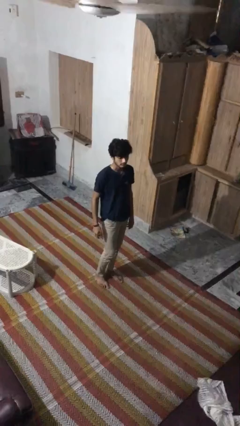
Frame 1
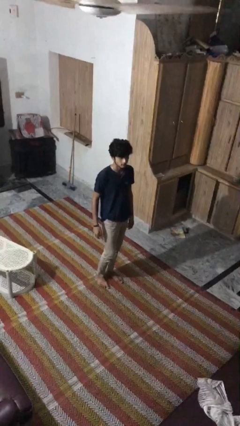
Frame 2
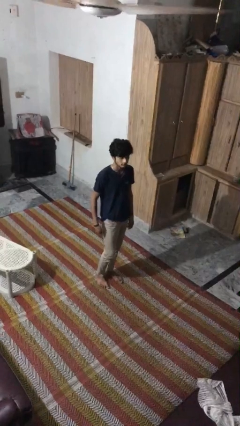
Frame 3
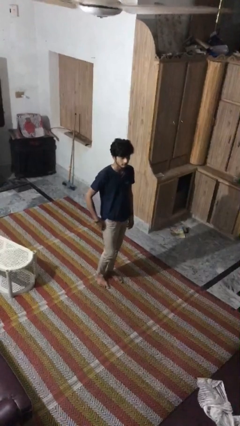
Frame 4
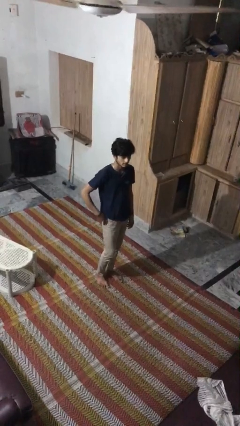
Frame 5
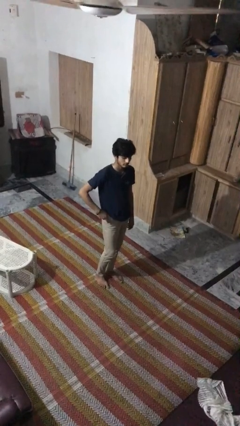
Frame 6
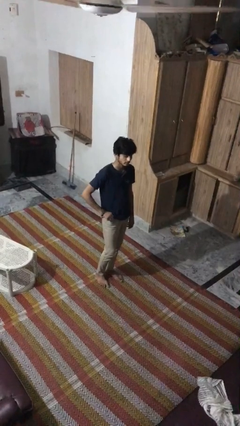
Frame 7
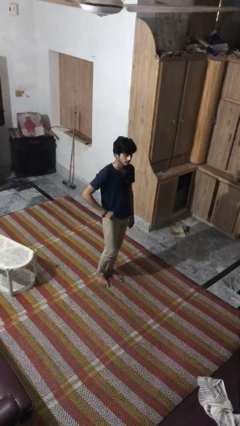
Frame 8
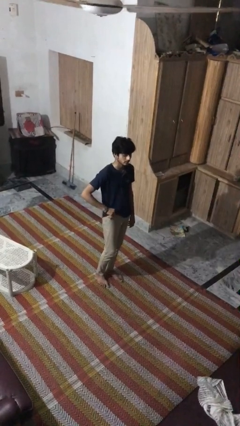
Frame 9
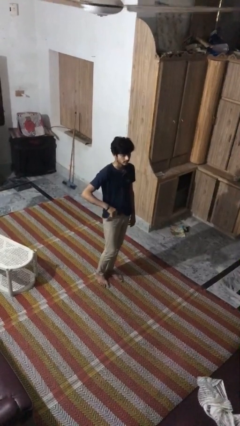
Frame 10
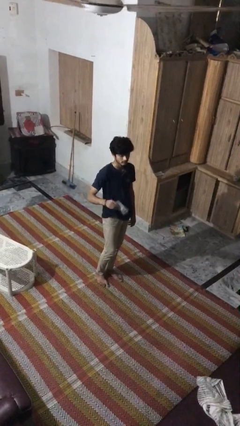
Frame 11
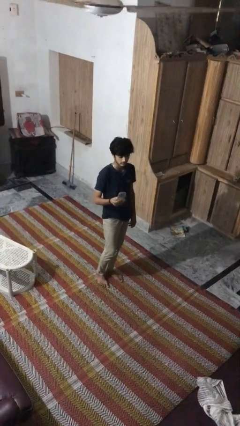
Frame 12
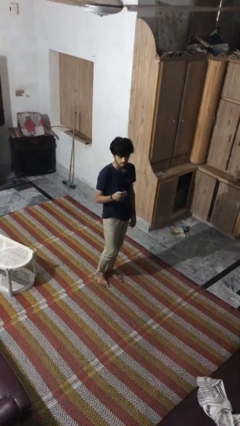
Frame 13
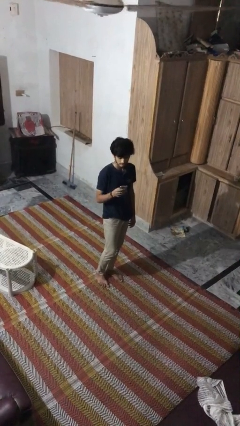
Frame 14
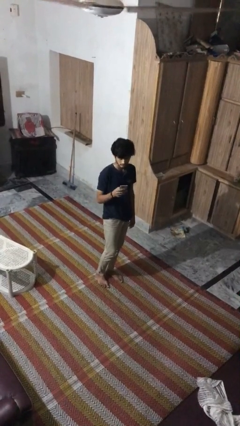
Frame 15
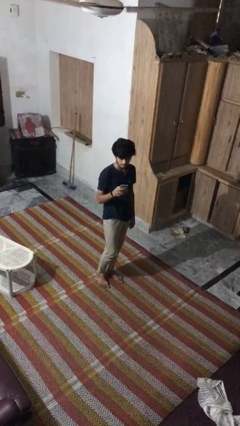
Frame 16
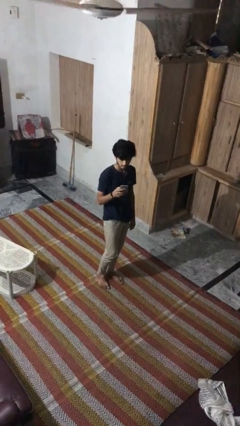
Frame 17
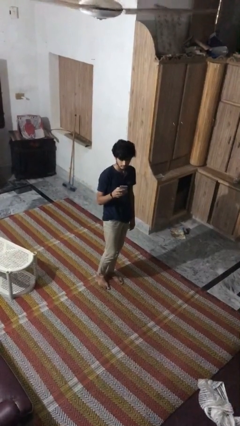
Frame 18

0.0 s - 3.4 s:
person takes phone from pocket

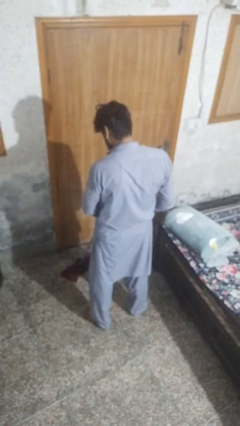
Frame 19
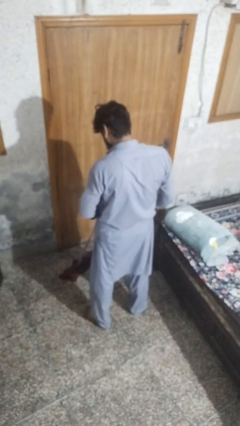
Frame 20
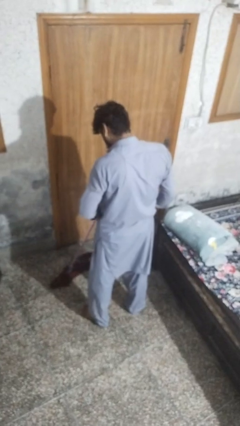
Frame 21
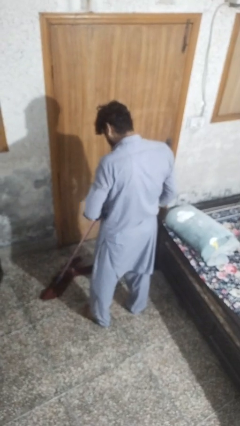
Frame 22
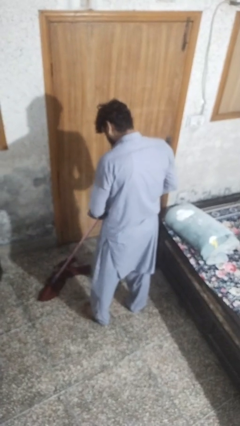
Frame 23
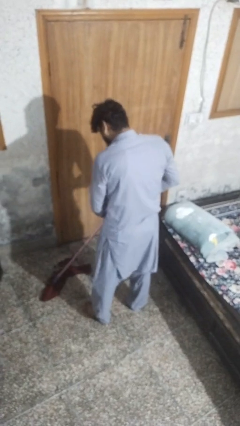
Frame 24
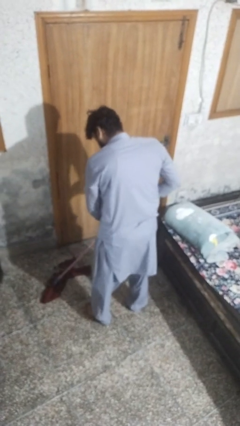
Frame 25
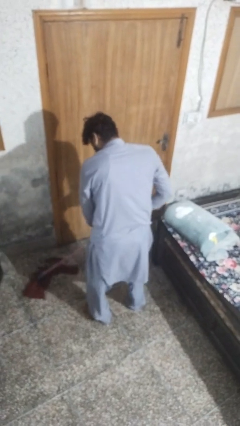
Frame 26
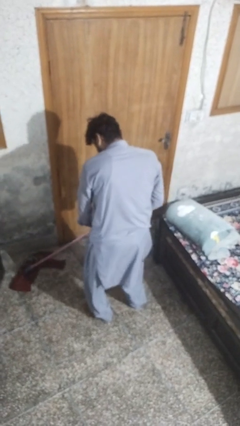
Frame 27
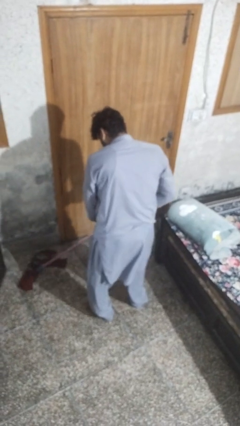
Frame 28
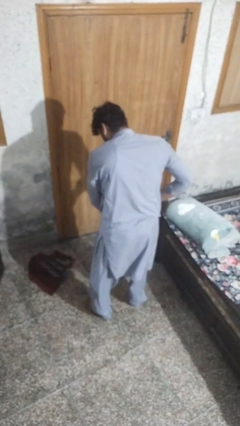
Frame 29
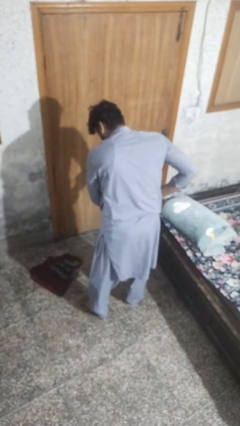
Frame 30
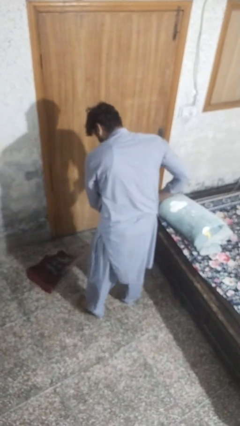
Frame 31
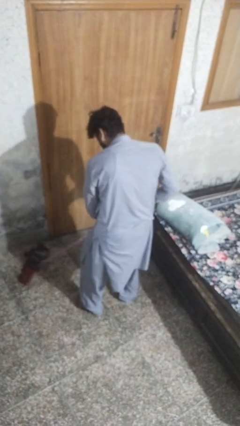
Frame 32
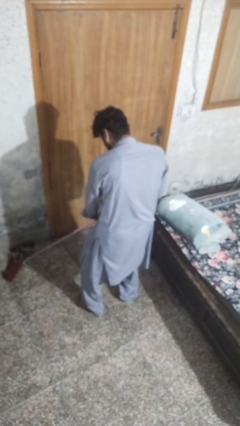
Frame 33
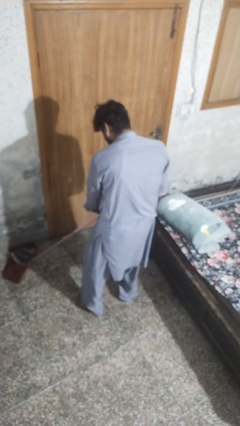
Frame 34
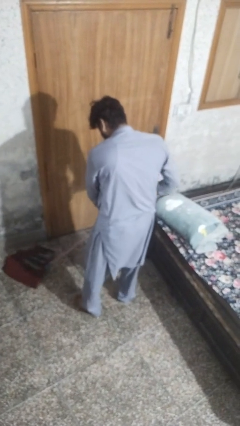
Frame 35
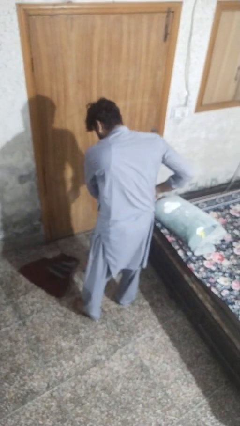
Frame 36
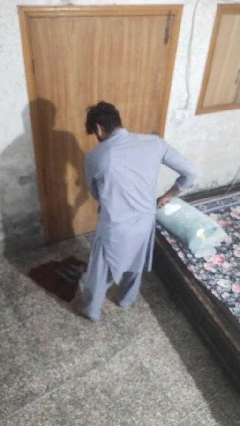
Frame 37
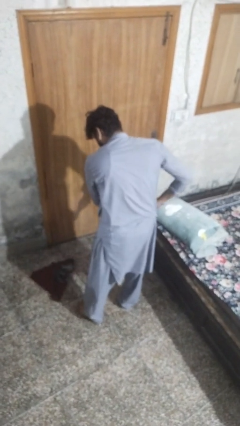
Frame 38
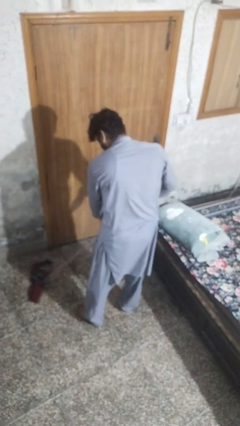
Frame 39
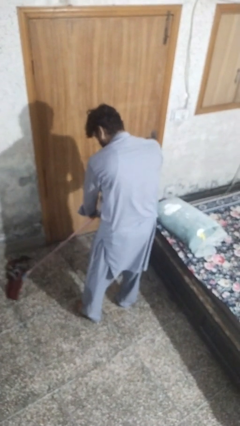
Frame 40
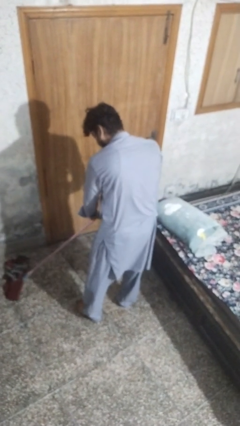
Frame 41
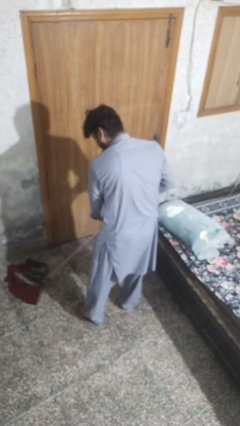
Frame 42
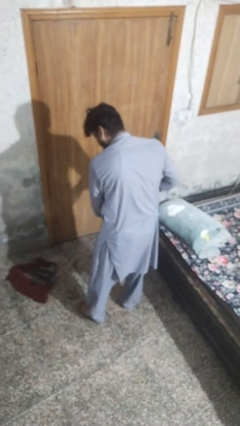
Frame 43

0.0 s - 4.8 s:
person mops

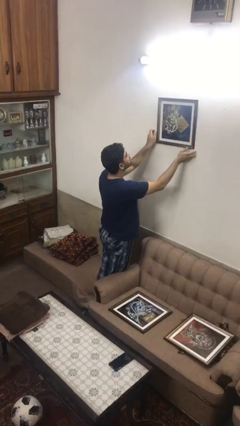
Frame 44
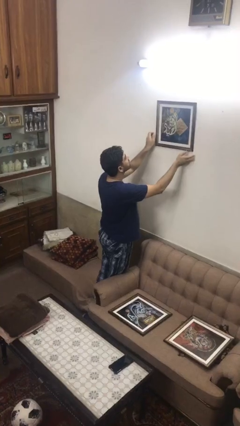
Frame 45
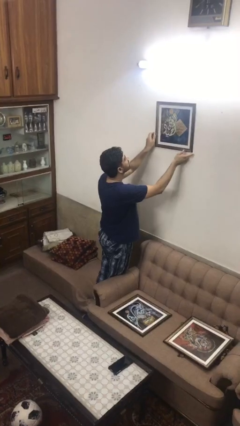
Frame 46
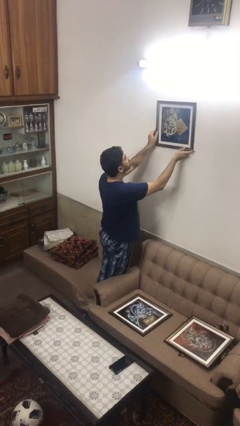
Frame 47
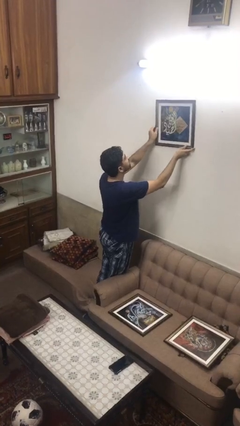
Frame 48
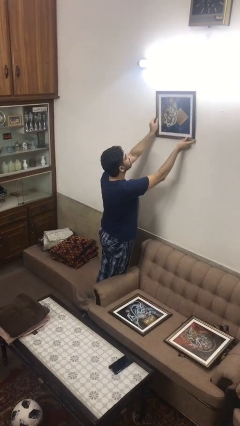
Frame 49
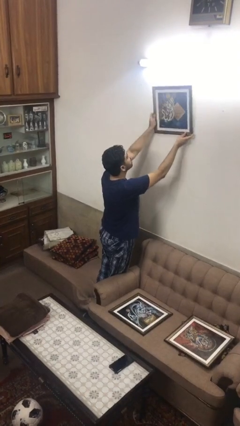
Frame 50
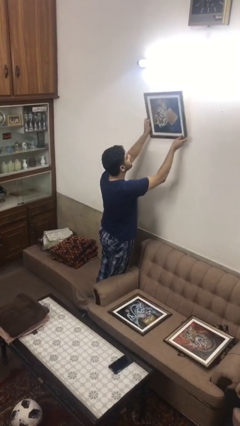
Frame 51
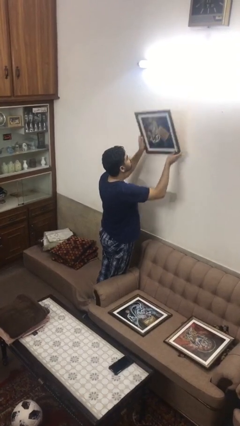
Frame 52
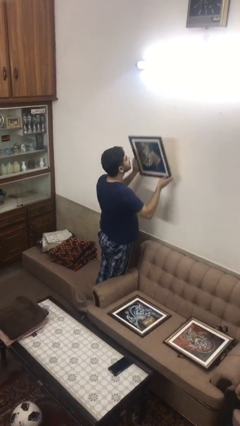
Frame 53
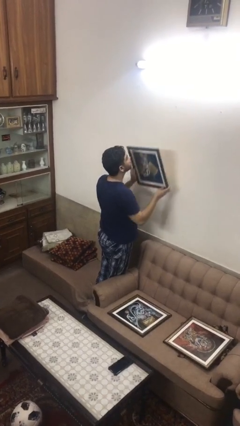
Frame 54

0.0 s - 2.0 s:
person takes down picture frame

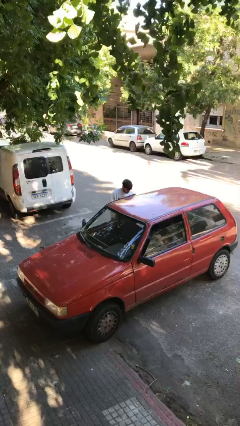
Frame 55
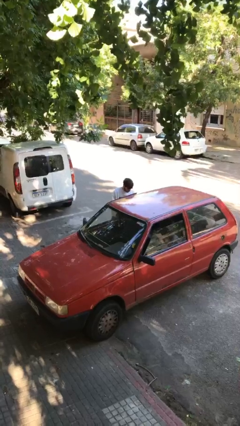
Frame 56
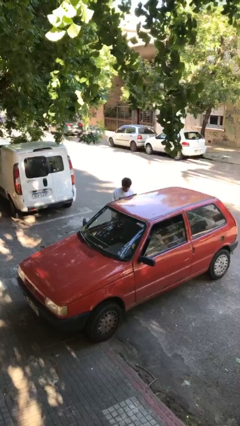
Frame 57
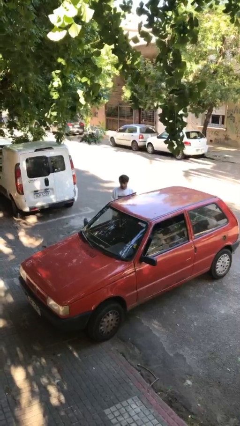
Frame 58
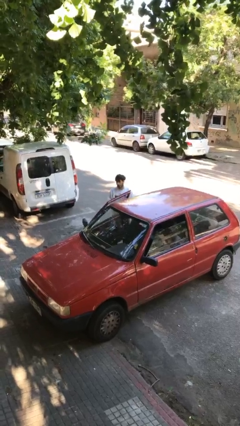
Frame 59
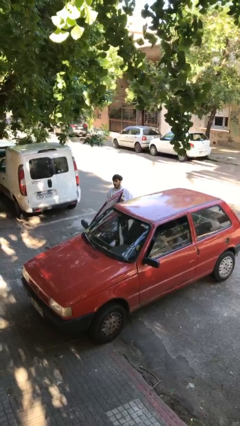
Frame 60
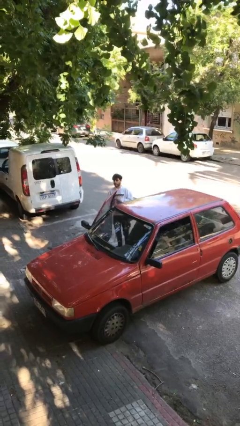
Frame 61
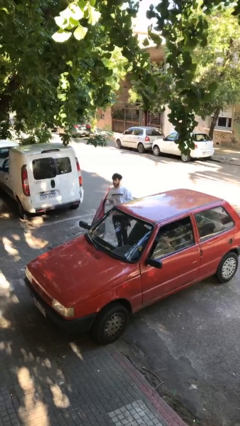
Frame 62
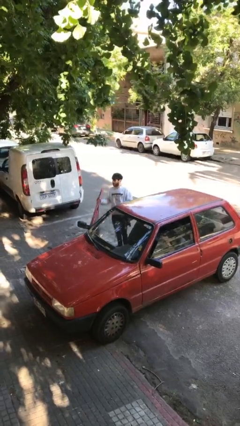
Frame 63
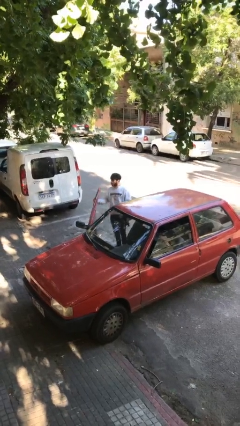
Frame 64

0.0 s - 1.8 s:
person opens car door

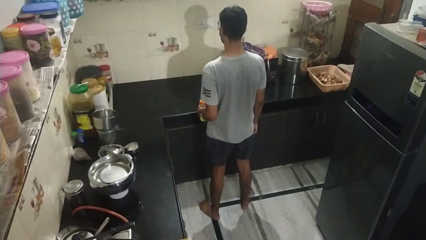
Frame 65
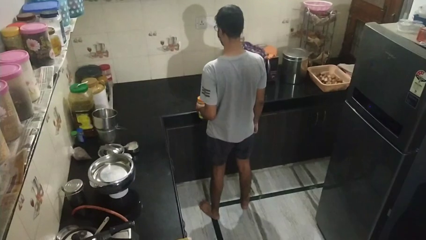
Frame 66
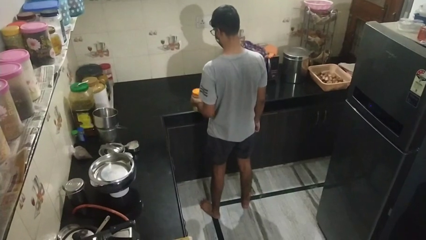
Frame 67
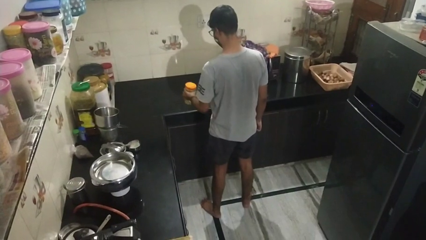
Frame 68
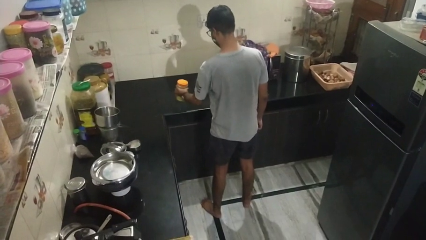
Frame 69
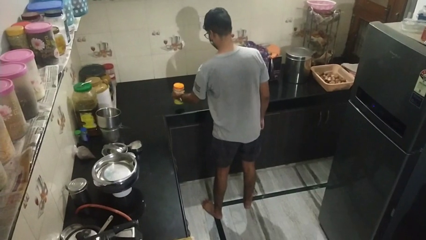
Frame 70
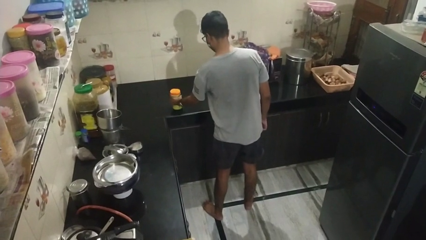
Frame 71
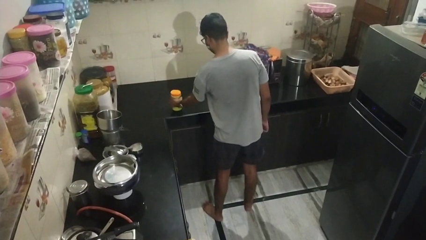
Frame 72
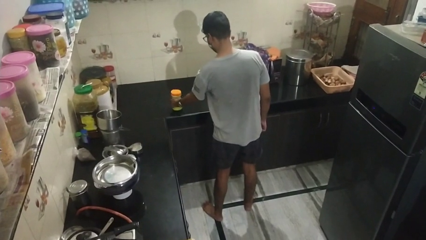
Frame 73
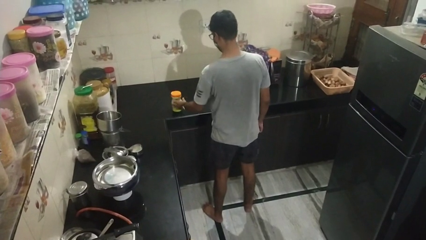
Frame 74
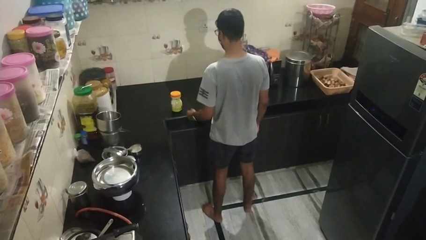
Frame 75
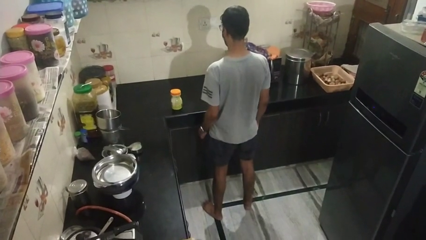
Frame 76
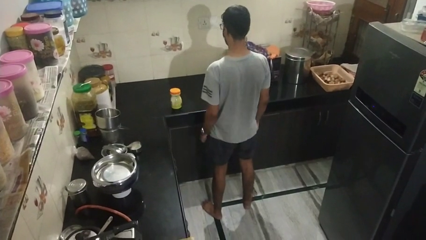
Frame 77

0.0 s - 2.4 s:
person puts down object on countertop

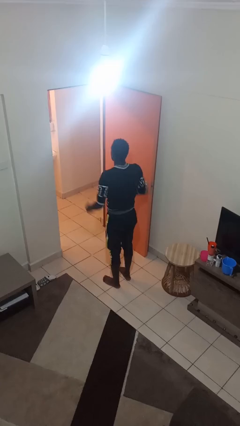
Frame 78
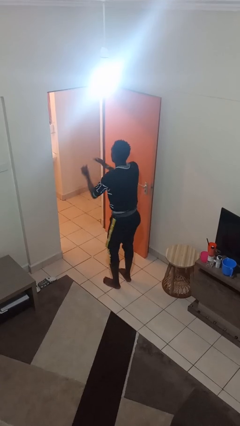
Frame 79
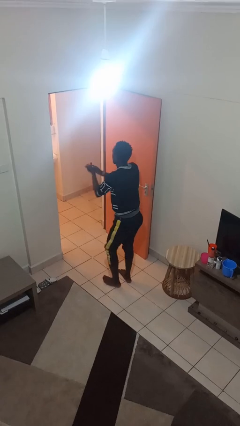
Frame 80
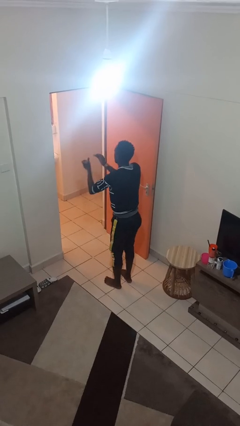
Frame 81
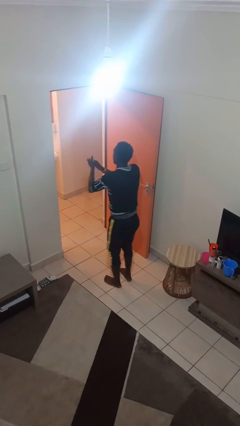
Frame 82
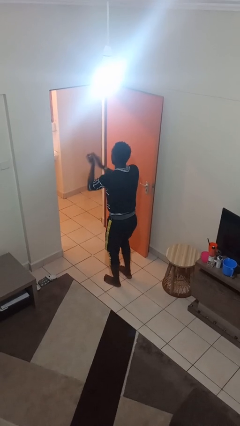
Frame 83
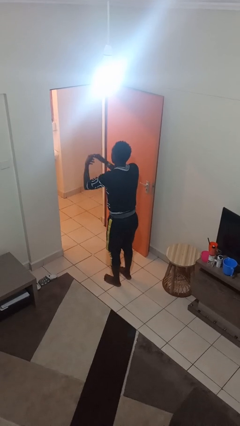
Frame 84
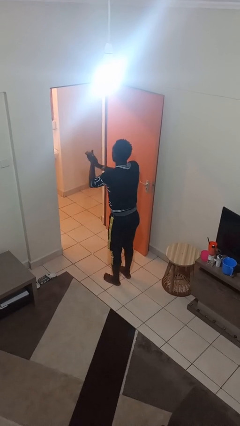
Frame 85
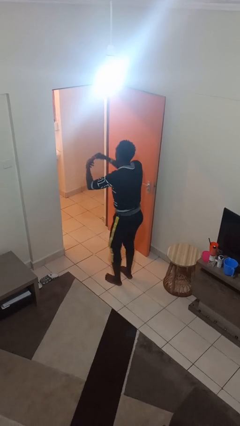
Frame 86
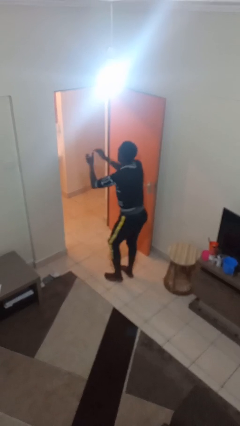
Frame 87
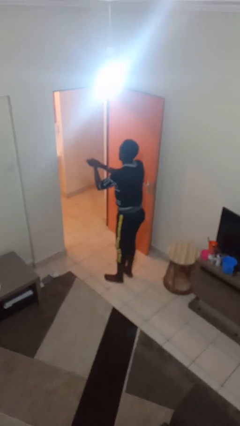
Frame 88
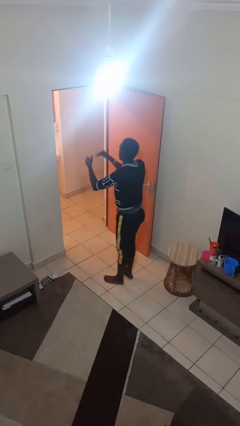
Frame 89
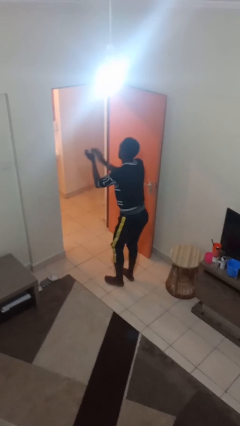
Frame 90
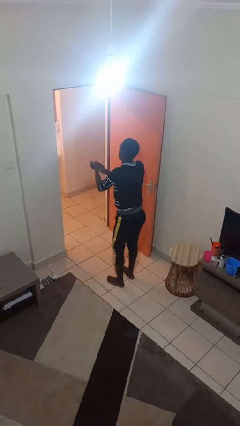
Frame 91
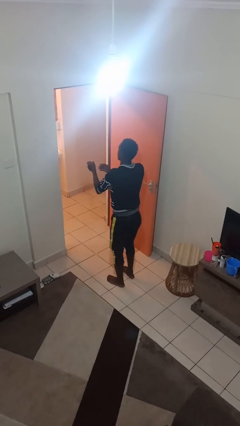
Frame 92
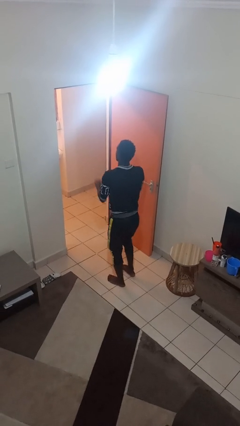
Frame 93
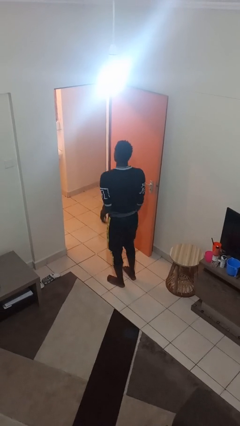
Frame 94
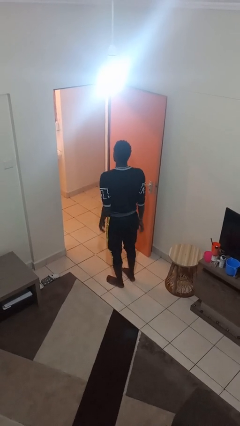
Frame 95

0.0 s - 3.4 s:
person claps hands
